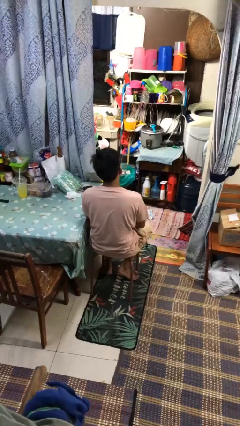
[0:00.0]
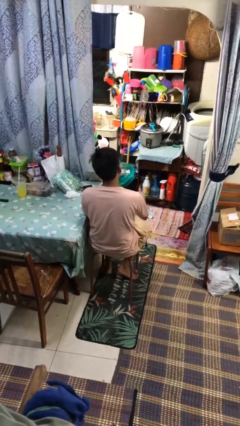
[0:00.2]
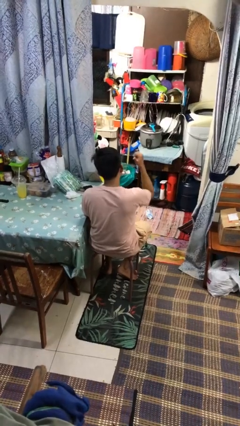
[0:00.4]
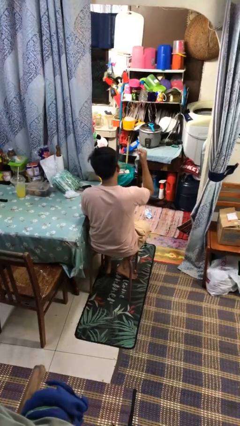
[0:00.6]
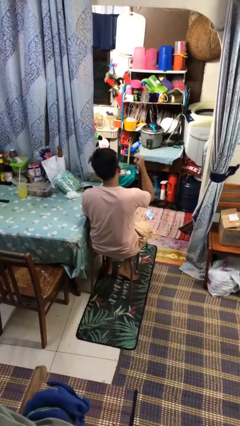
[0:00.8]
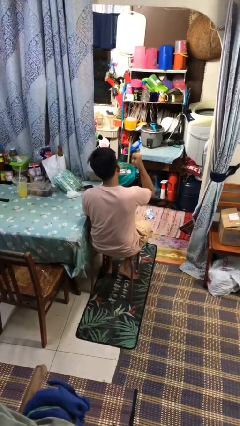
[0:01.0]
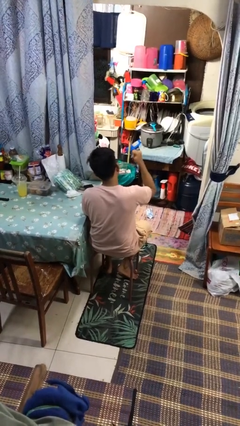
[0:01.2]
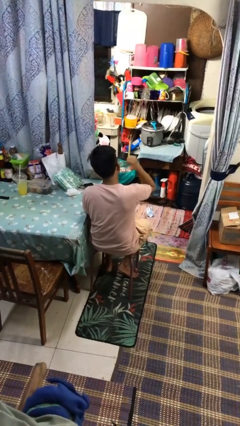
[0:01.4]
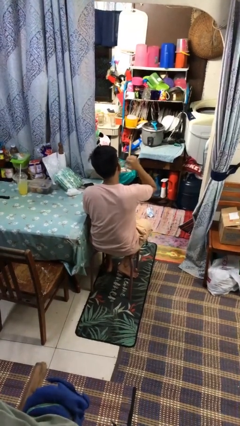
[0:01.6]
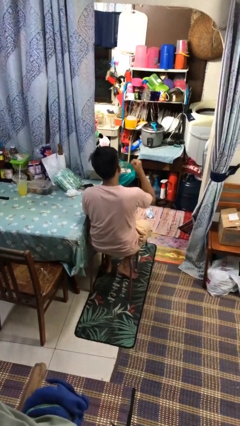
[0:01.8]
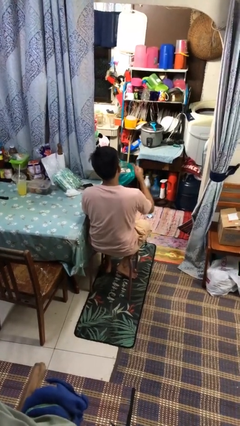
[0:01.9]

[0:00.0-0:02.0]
person gestures behind me

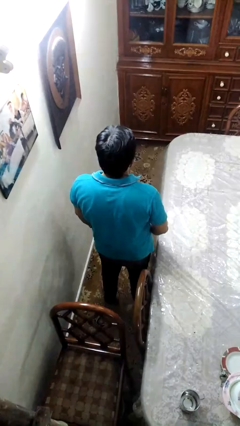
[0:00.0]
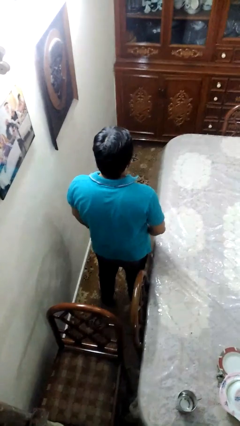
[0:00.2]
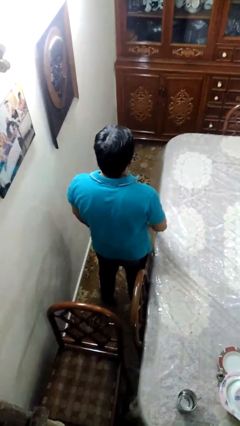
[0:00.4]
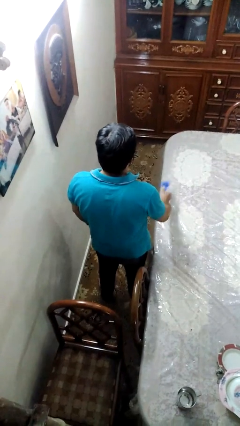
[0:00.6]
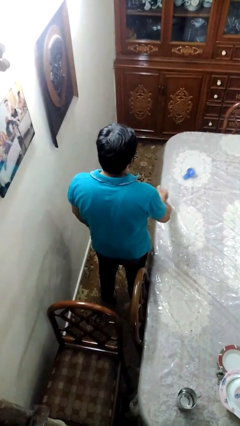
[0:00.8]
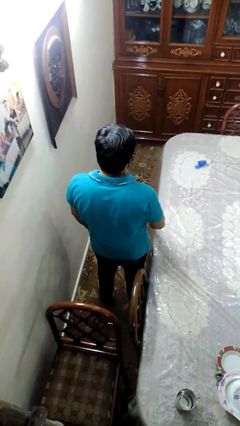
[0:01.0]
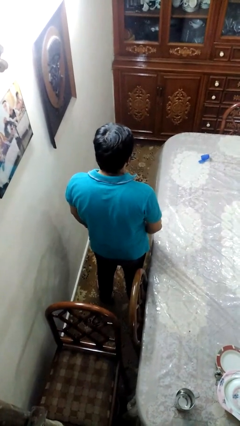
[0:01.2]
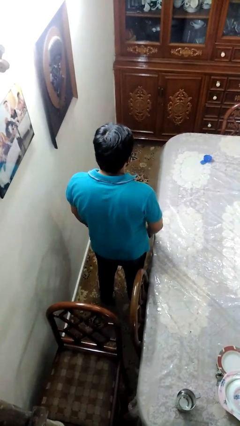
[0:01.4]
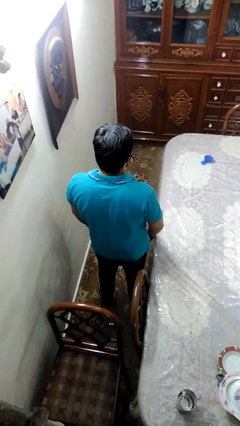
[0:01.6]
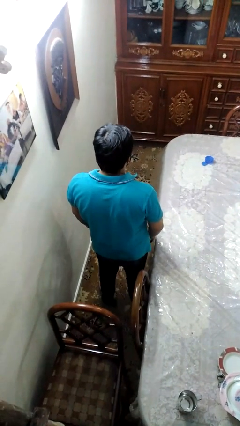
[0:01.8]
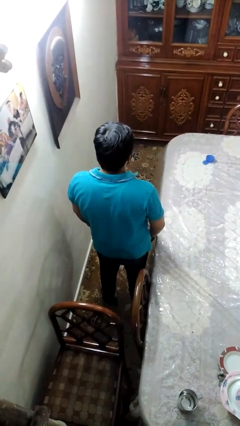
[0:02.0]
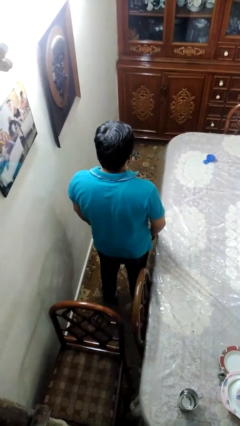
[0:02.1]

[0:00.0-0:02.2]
person throws object on table

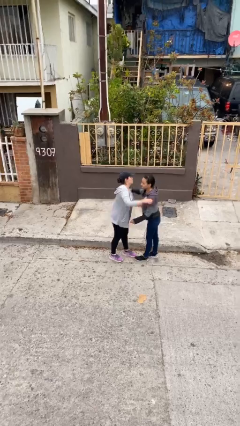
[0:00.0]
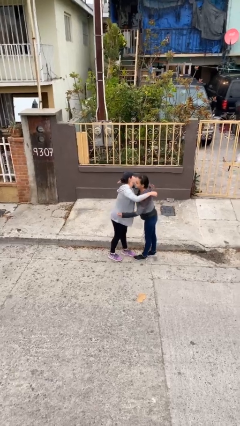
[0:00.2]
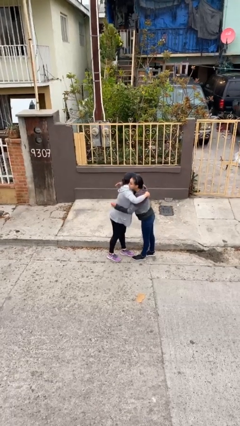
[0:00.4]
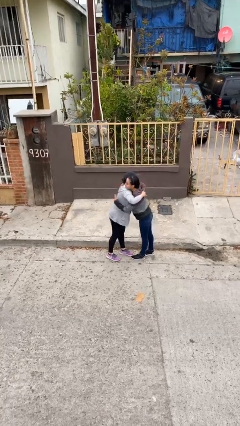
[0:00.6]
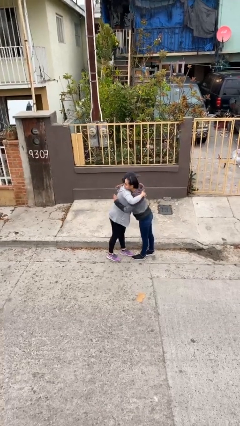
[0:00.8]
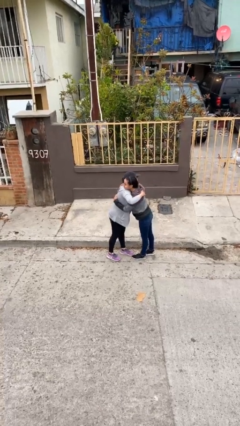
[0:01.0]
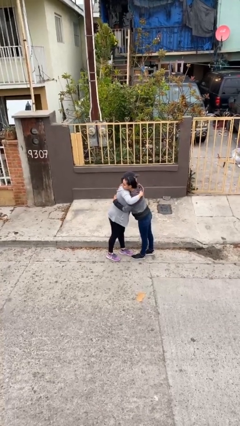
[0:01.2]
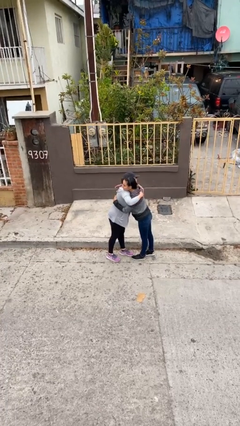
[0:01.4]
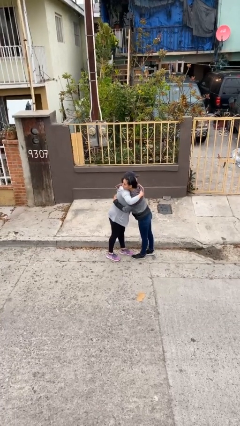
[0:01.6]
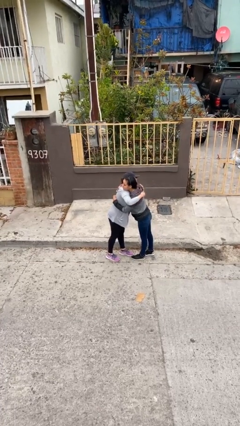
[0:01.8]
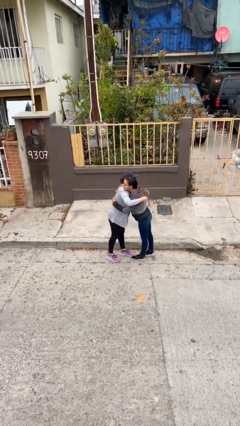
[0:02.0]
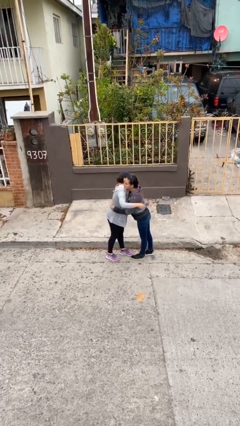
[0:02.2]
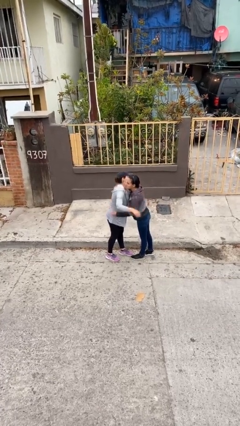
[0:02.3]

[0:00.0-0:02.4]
person embraces person

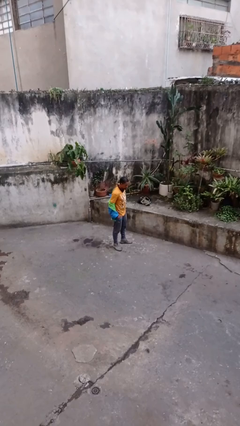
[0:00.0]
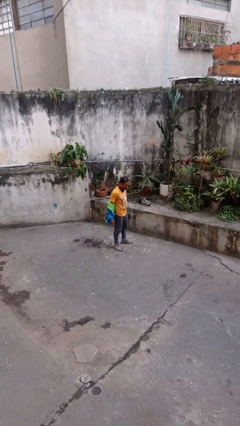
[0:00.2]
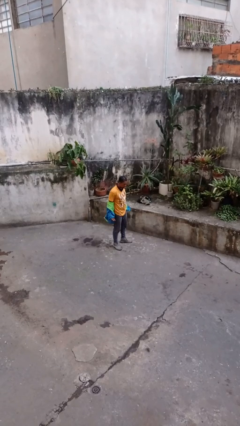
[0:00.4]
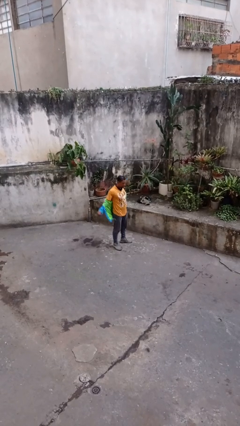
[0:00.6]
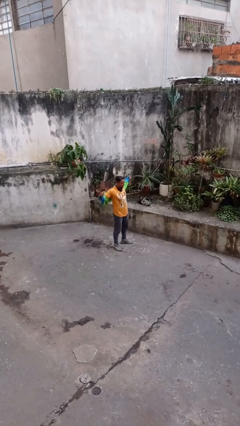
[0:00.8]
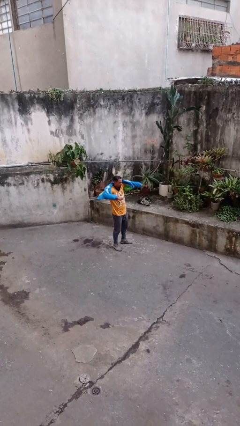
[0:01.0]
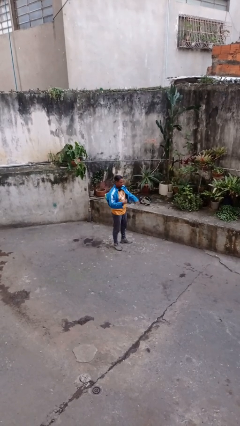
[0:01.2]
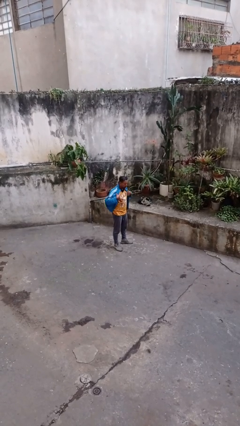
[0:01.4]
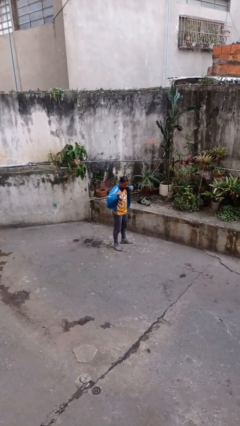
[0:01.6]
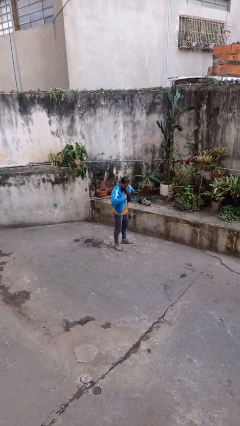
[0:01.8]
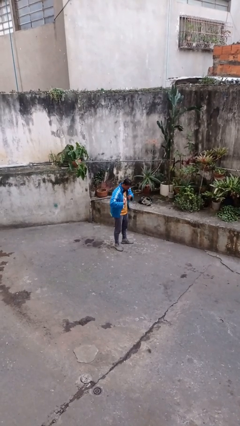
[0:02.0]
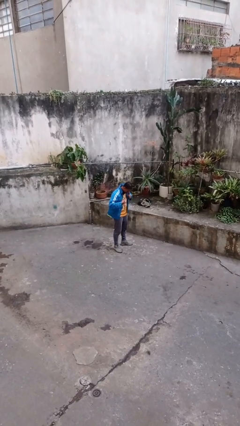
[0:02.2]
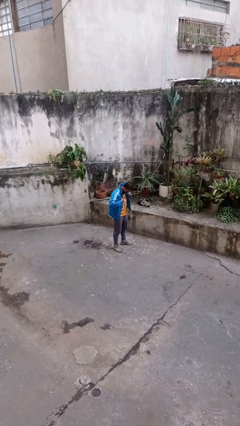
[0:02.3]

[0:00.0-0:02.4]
person puts on jacket

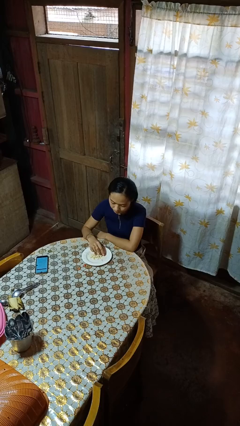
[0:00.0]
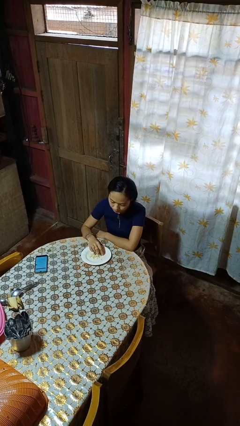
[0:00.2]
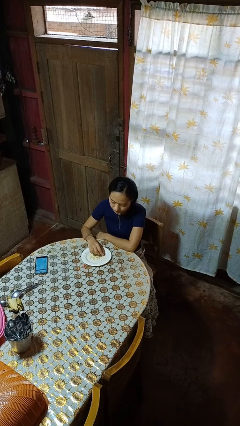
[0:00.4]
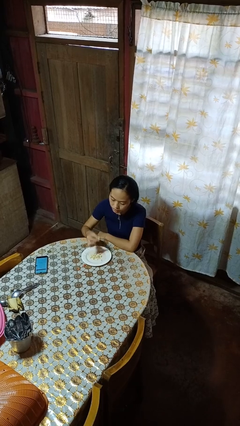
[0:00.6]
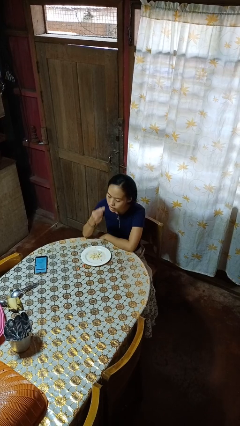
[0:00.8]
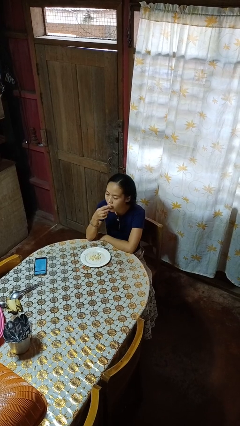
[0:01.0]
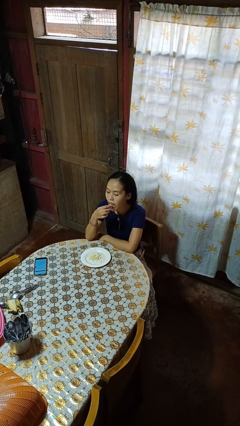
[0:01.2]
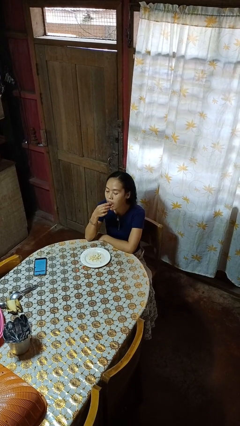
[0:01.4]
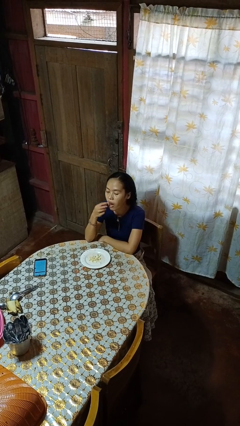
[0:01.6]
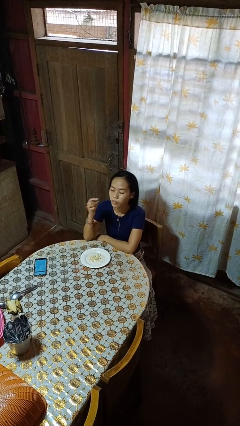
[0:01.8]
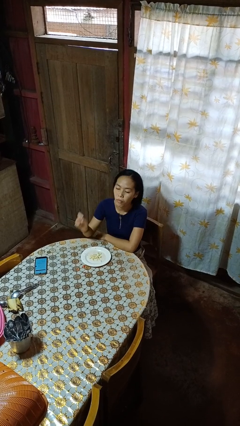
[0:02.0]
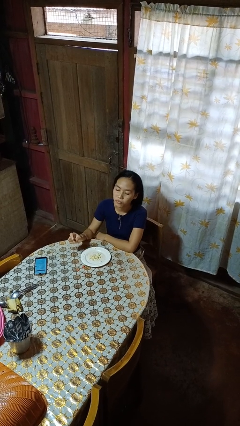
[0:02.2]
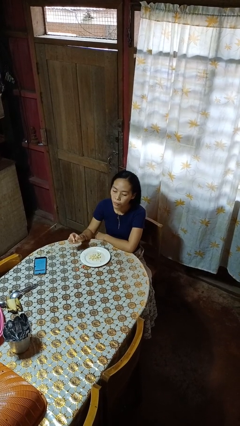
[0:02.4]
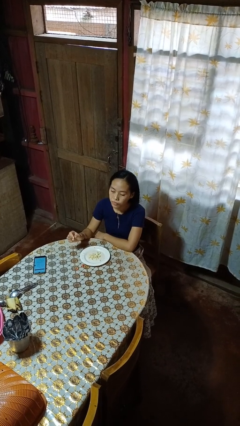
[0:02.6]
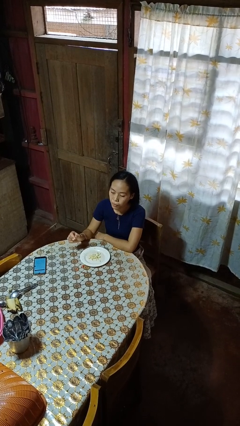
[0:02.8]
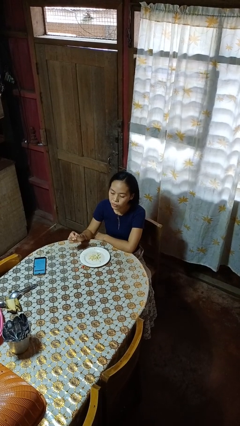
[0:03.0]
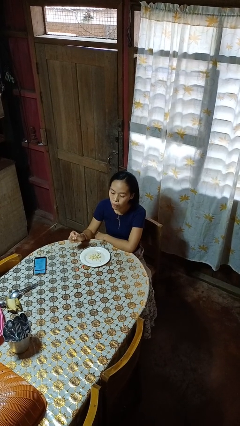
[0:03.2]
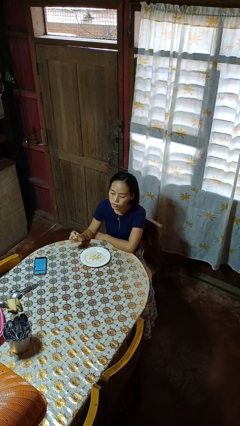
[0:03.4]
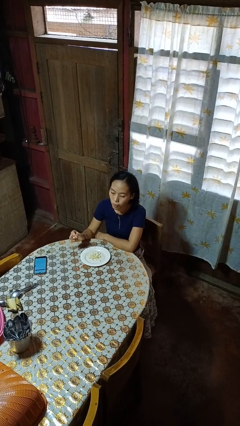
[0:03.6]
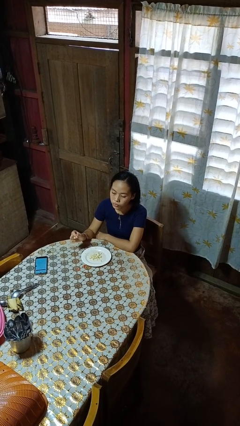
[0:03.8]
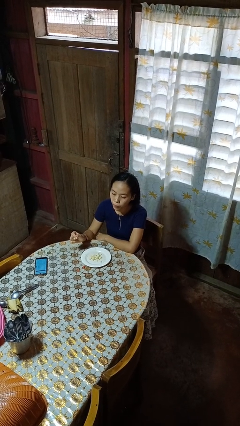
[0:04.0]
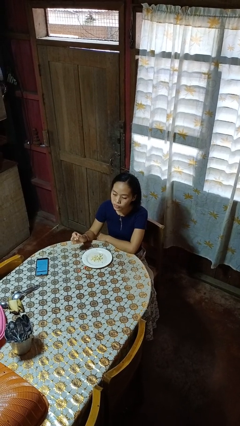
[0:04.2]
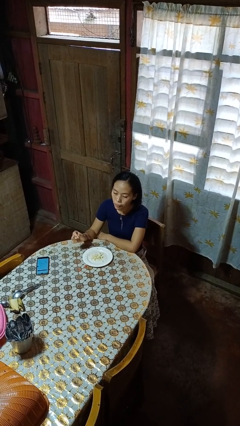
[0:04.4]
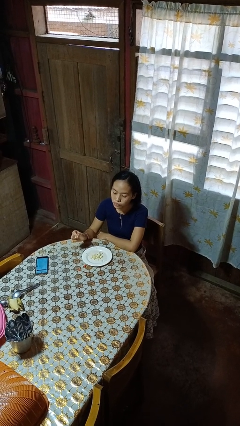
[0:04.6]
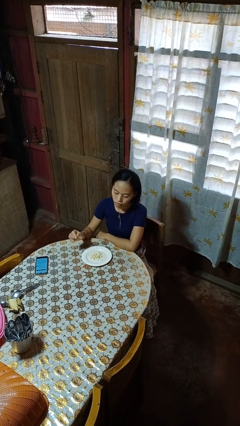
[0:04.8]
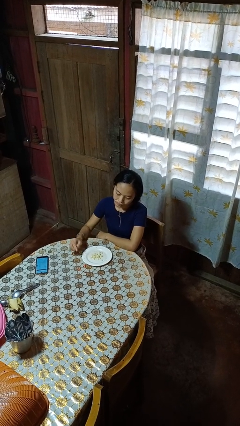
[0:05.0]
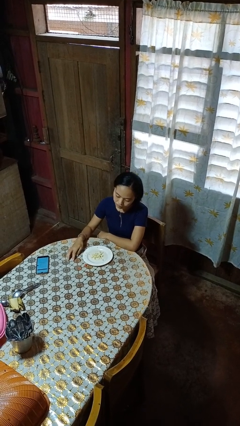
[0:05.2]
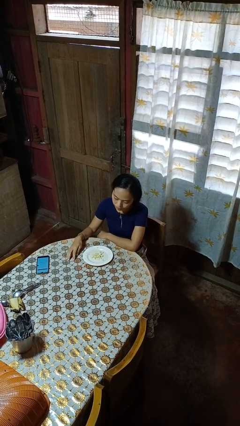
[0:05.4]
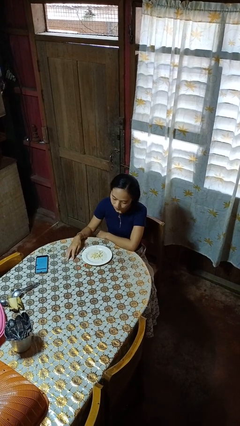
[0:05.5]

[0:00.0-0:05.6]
person eats with hands

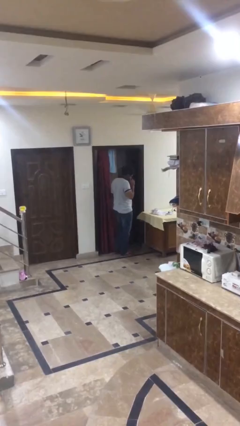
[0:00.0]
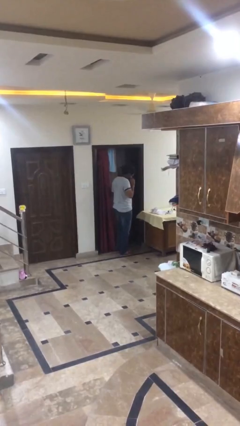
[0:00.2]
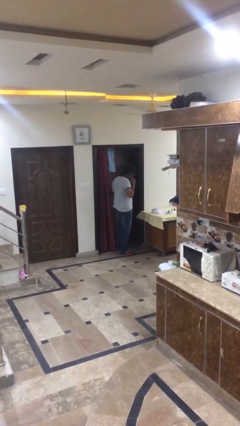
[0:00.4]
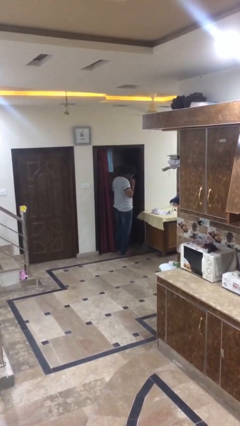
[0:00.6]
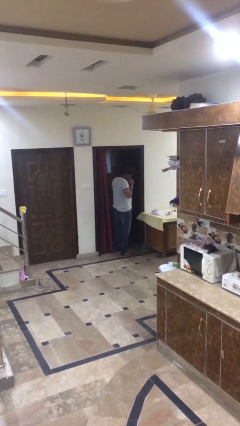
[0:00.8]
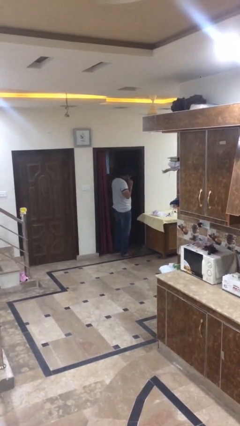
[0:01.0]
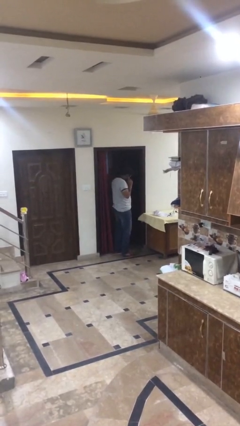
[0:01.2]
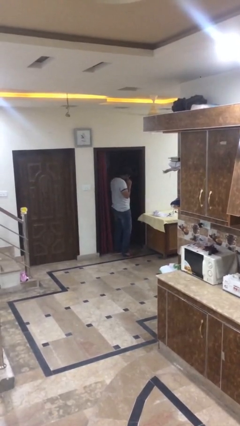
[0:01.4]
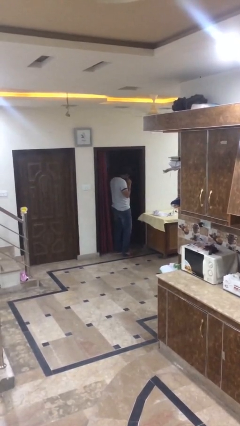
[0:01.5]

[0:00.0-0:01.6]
person opens facility door

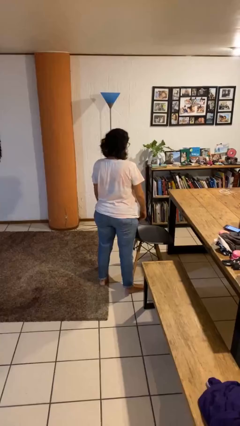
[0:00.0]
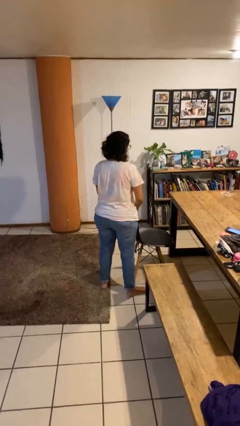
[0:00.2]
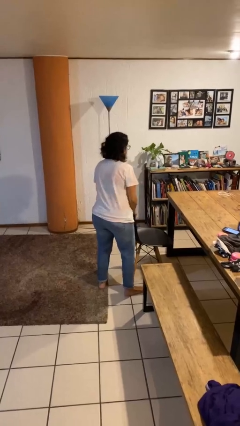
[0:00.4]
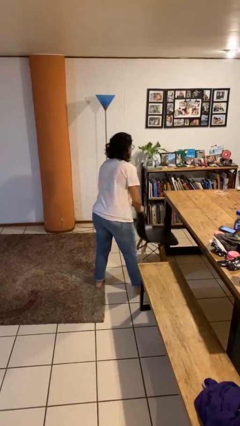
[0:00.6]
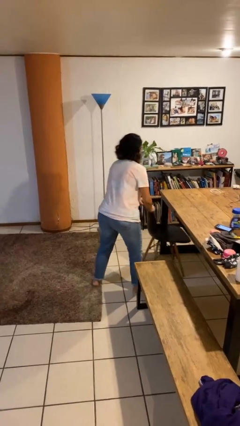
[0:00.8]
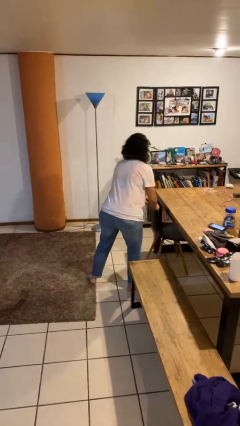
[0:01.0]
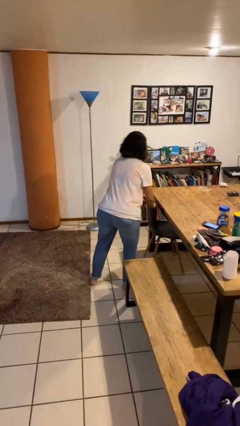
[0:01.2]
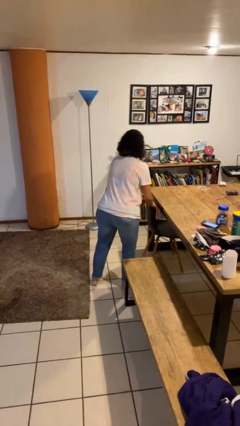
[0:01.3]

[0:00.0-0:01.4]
person pushes in chair
